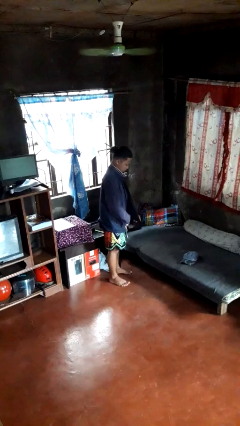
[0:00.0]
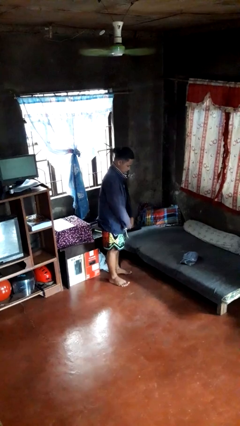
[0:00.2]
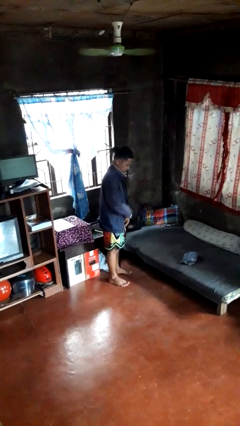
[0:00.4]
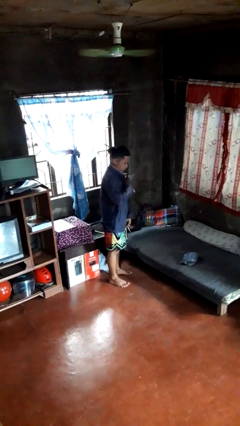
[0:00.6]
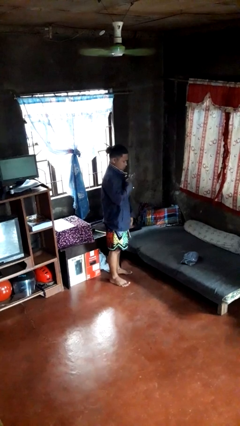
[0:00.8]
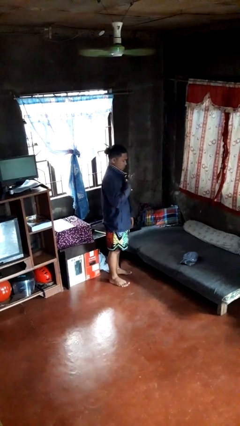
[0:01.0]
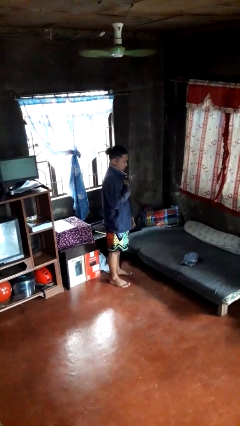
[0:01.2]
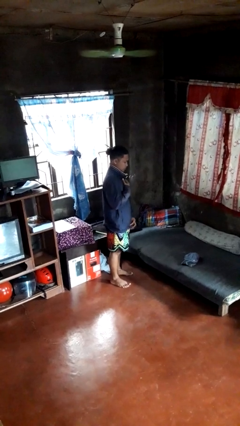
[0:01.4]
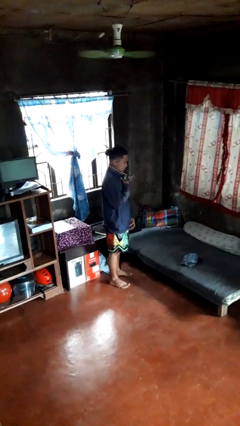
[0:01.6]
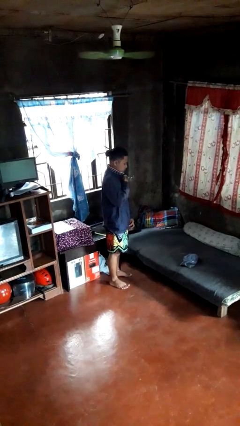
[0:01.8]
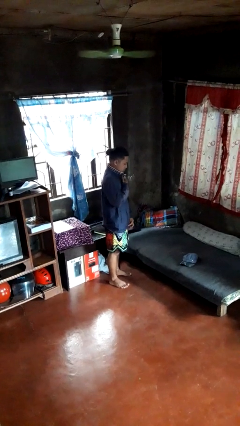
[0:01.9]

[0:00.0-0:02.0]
person zips up jacket

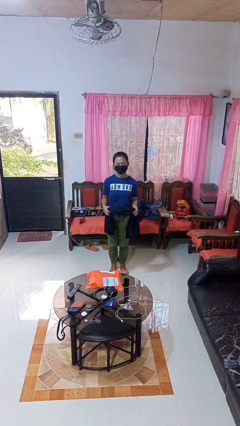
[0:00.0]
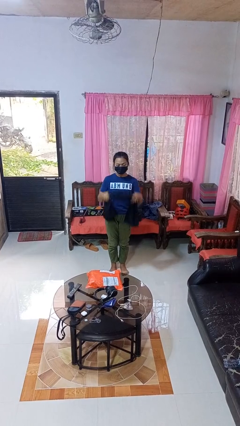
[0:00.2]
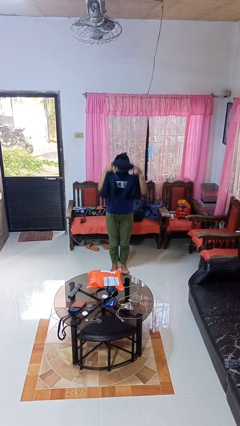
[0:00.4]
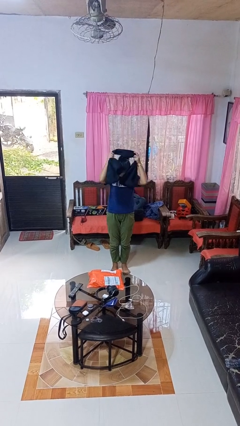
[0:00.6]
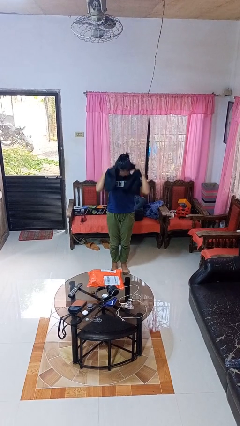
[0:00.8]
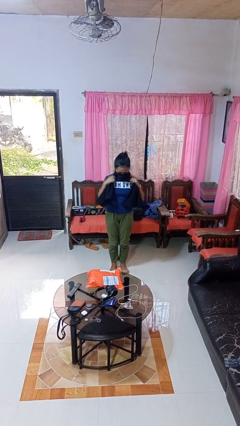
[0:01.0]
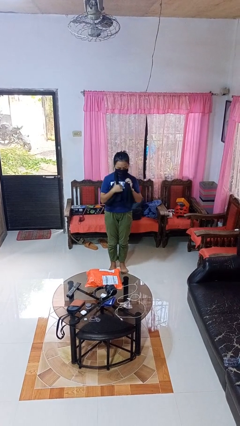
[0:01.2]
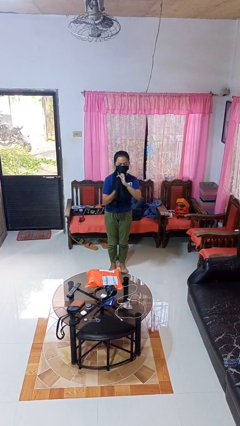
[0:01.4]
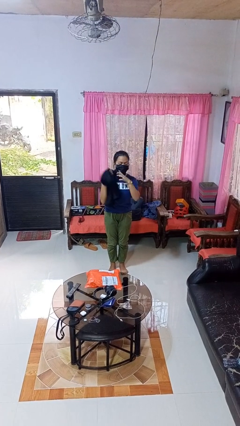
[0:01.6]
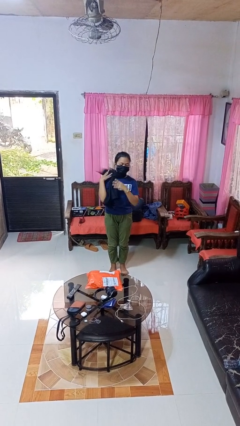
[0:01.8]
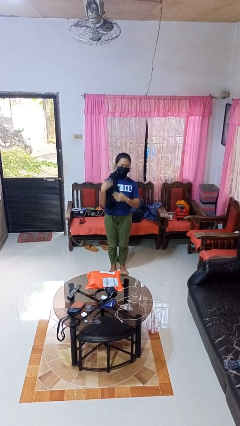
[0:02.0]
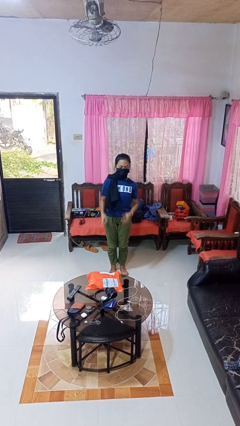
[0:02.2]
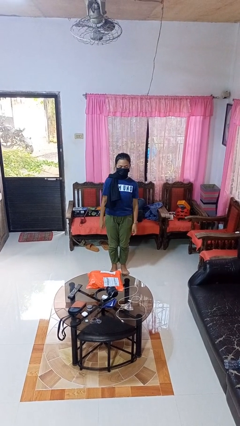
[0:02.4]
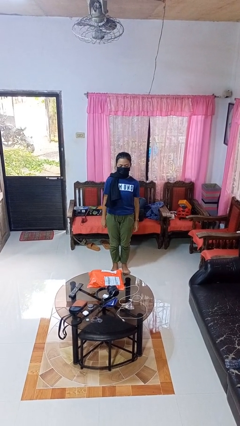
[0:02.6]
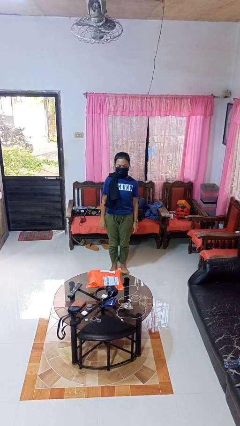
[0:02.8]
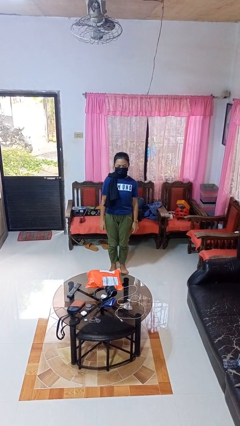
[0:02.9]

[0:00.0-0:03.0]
person puts on scarf

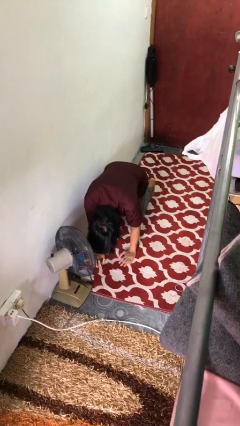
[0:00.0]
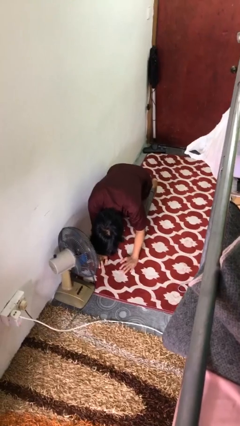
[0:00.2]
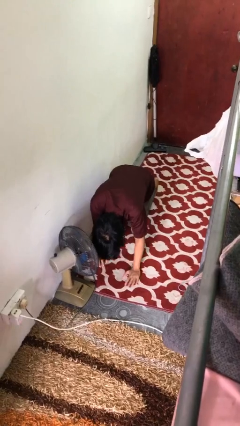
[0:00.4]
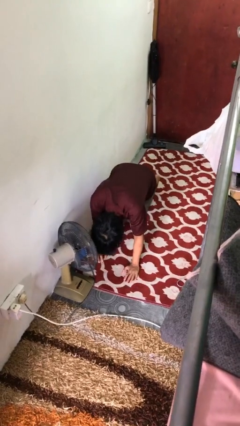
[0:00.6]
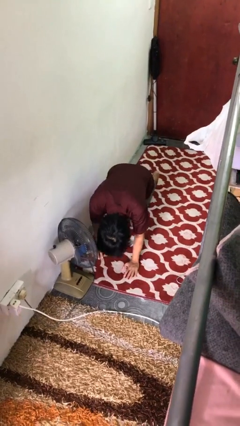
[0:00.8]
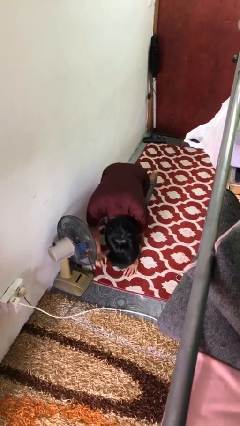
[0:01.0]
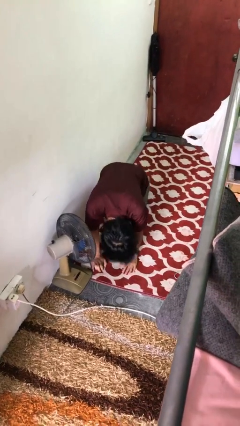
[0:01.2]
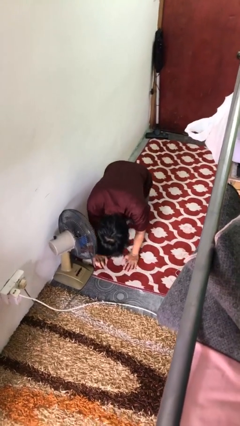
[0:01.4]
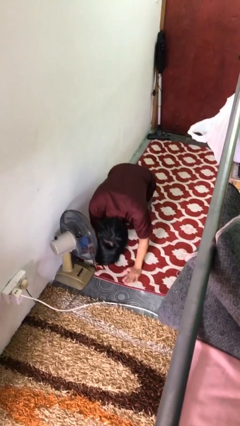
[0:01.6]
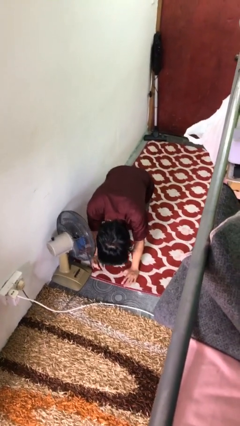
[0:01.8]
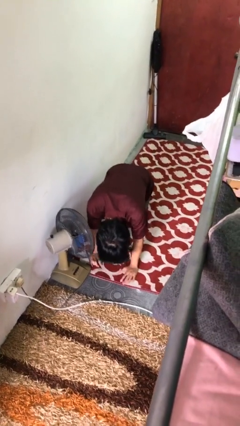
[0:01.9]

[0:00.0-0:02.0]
person crawls

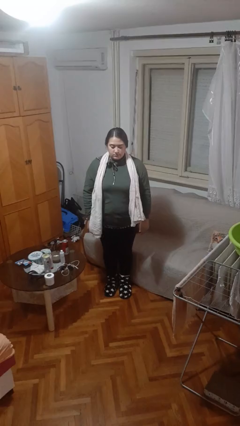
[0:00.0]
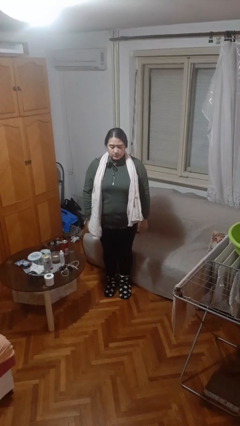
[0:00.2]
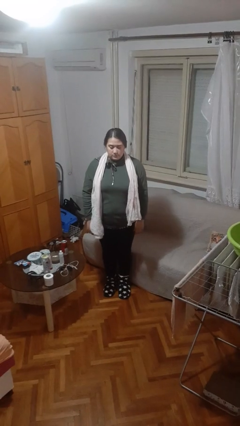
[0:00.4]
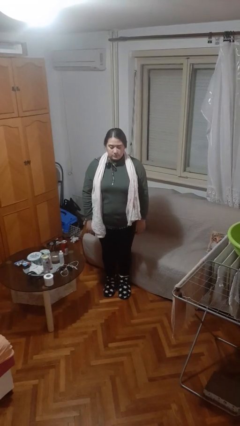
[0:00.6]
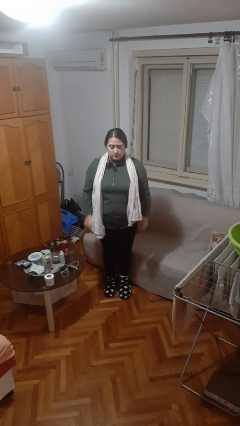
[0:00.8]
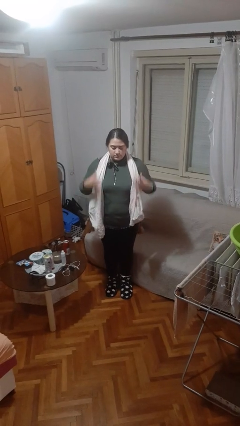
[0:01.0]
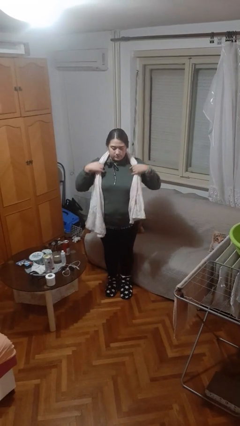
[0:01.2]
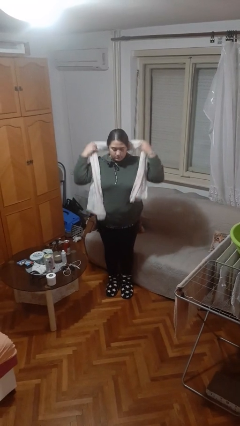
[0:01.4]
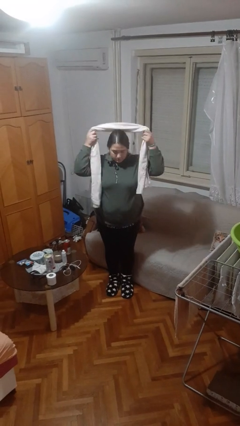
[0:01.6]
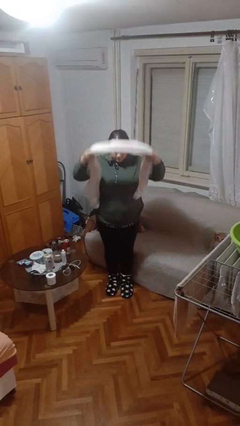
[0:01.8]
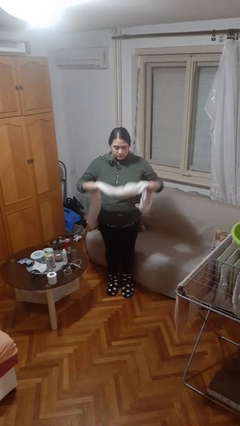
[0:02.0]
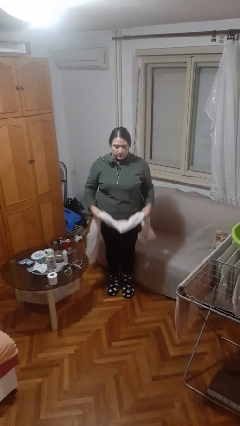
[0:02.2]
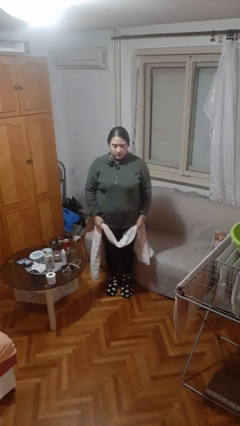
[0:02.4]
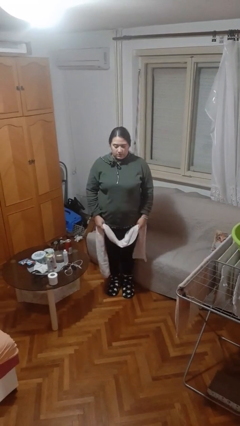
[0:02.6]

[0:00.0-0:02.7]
person takes off scarf

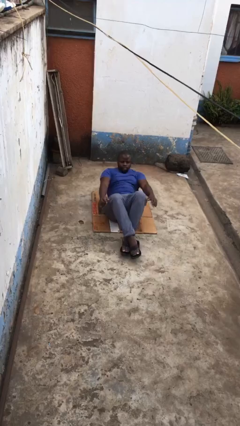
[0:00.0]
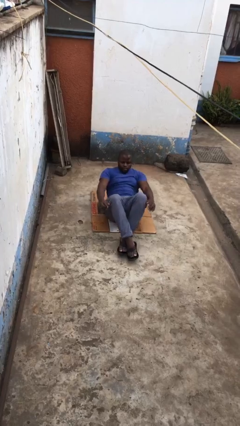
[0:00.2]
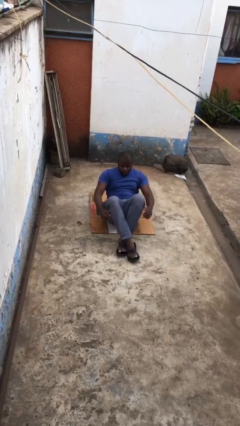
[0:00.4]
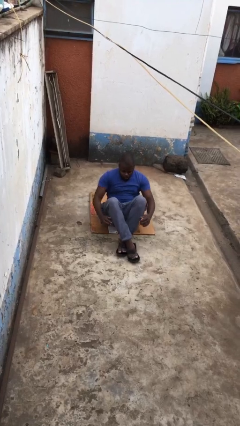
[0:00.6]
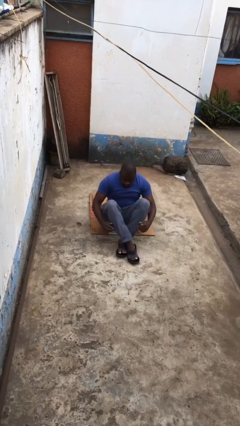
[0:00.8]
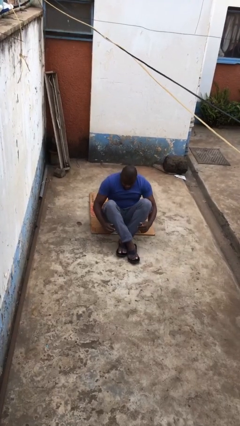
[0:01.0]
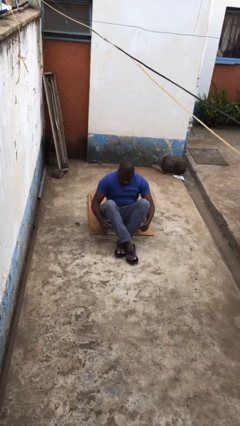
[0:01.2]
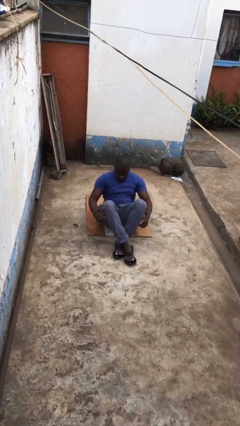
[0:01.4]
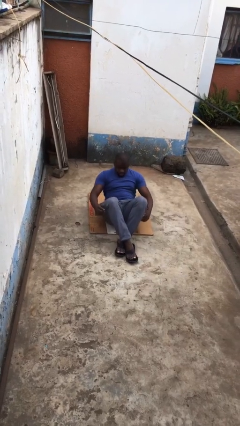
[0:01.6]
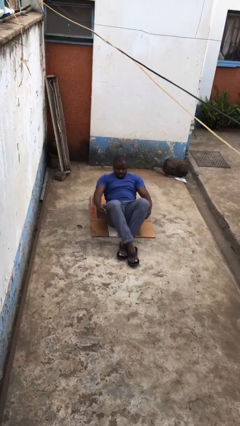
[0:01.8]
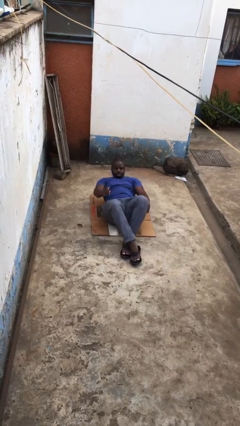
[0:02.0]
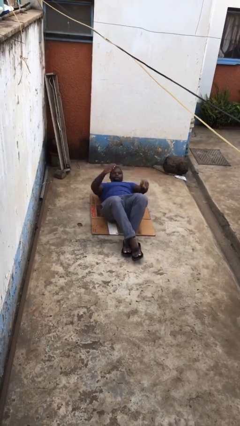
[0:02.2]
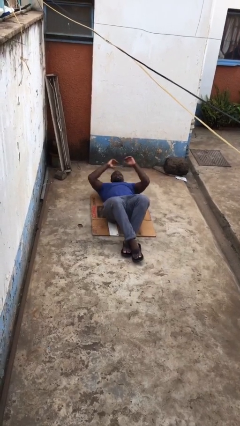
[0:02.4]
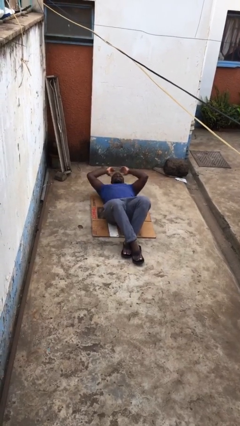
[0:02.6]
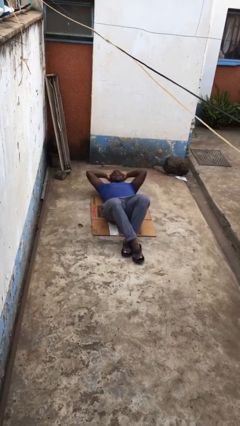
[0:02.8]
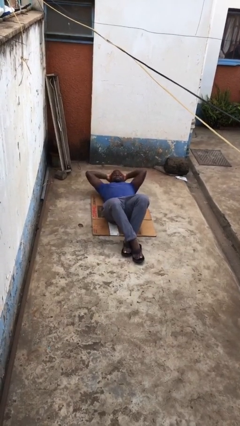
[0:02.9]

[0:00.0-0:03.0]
person exercises with situp

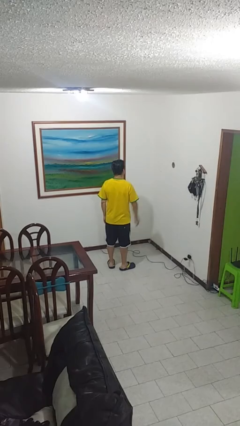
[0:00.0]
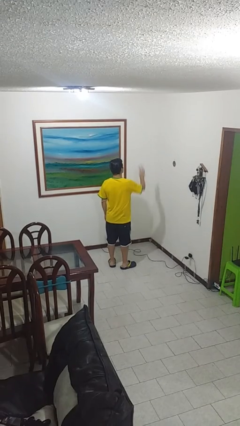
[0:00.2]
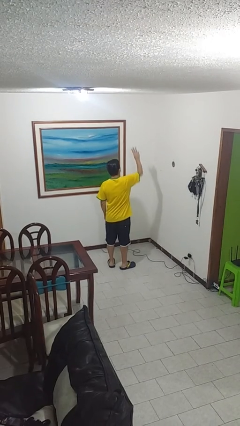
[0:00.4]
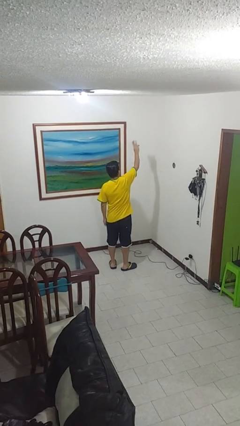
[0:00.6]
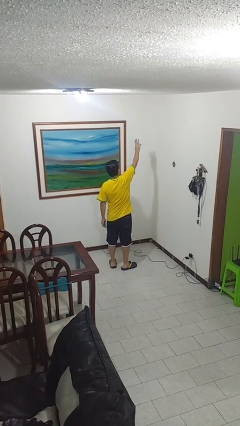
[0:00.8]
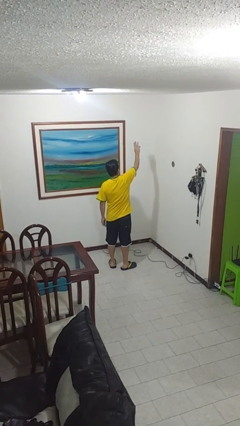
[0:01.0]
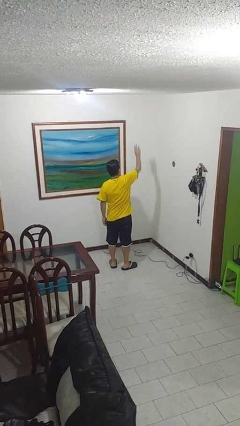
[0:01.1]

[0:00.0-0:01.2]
person gestures number three

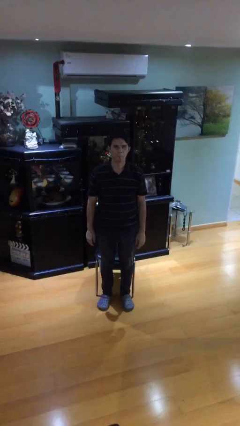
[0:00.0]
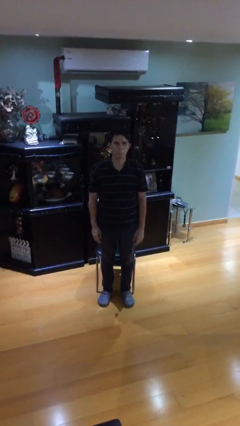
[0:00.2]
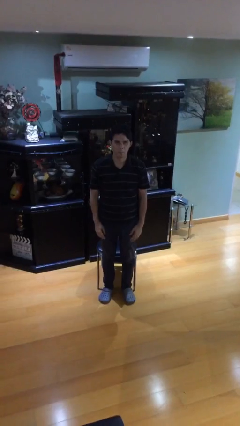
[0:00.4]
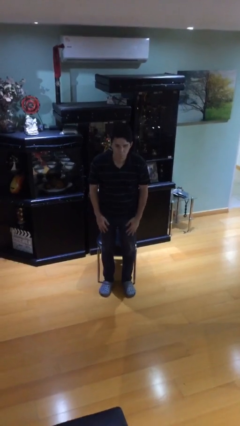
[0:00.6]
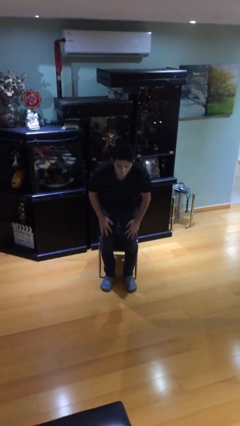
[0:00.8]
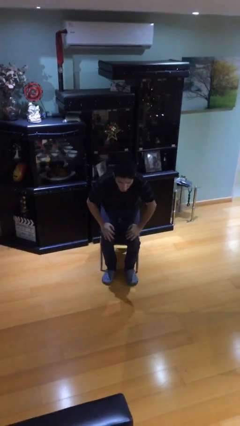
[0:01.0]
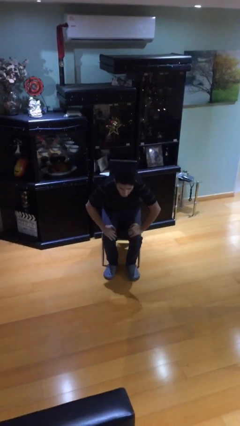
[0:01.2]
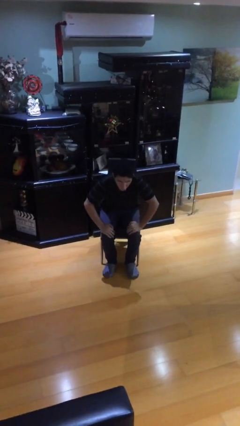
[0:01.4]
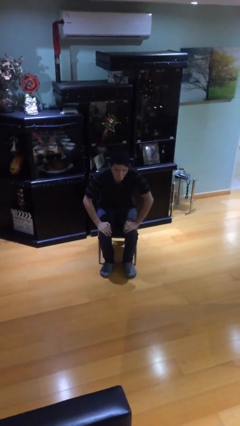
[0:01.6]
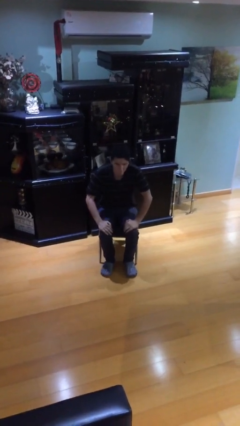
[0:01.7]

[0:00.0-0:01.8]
person sits down

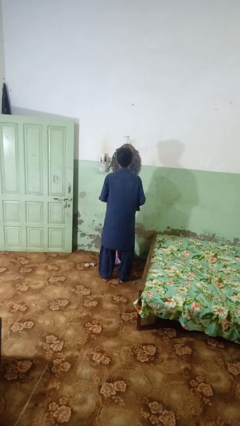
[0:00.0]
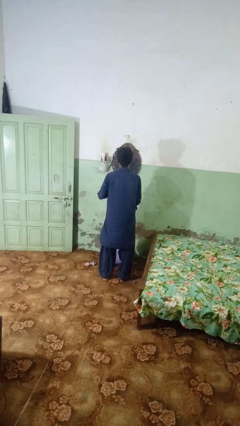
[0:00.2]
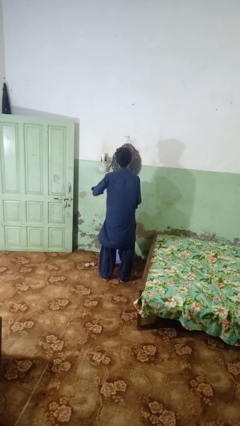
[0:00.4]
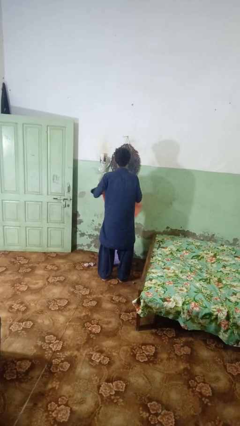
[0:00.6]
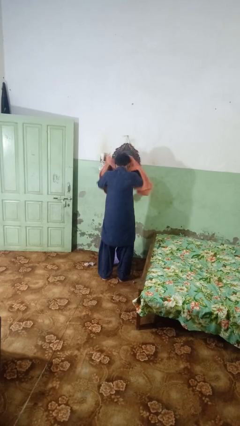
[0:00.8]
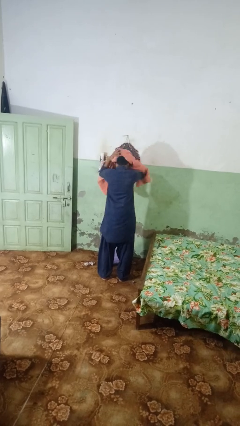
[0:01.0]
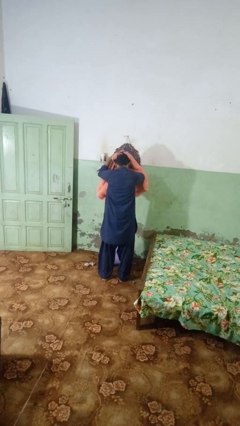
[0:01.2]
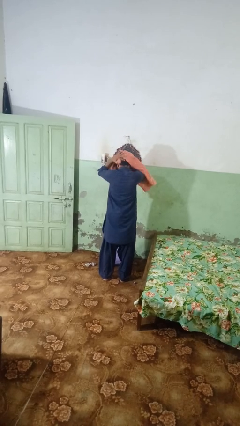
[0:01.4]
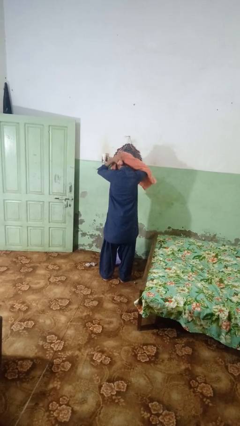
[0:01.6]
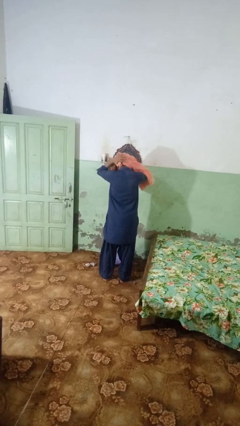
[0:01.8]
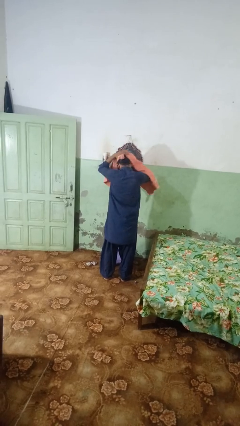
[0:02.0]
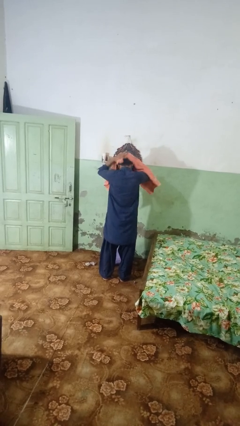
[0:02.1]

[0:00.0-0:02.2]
person dries hair with towel
